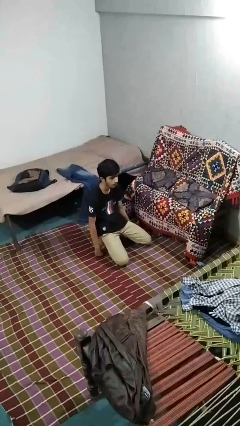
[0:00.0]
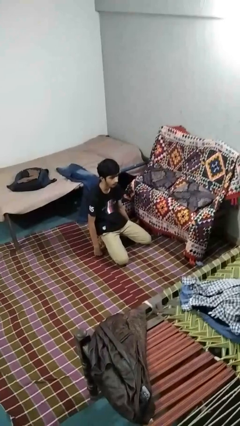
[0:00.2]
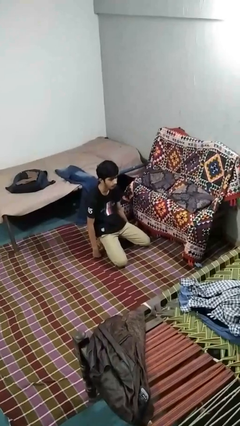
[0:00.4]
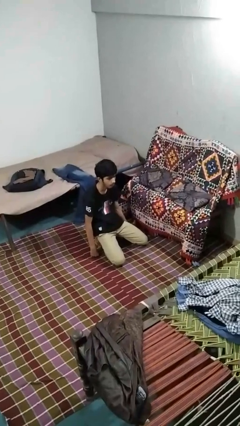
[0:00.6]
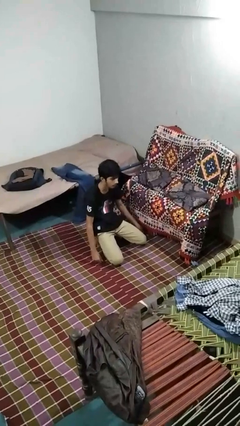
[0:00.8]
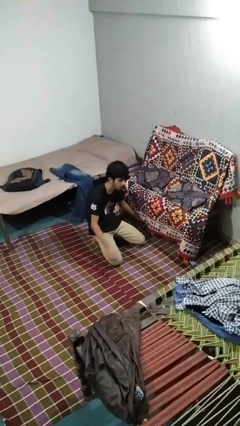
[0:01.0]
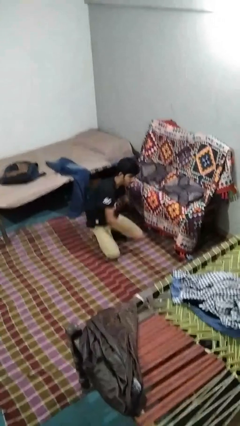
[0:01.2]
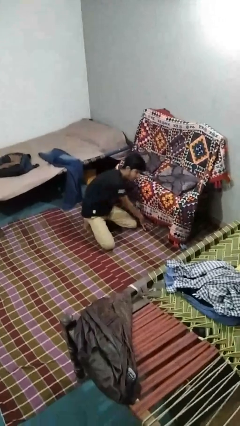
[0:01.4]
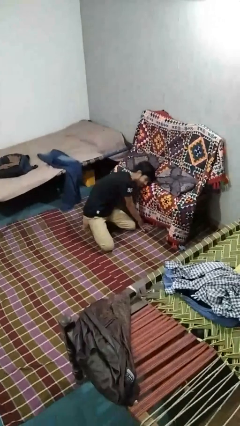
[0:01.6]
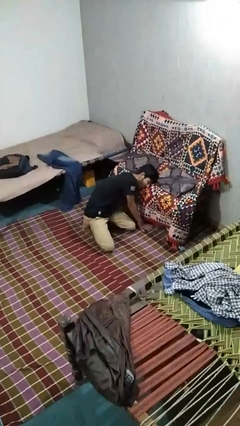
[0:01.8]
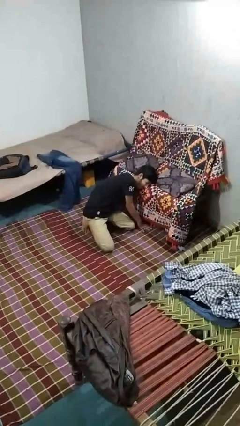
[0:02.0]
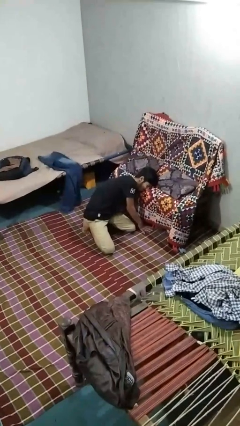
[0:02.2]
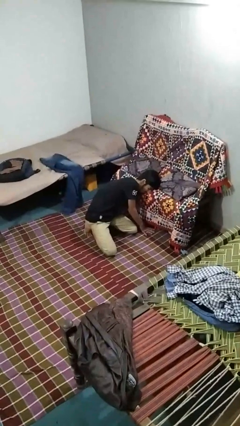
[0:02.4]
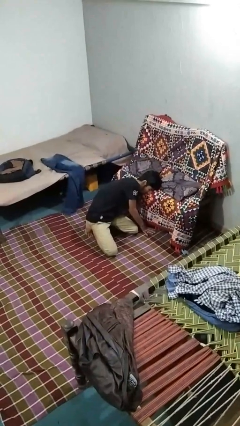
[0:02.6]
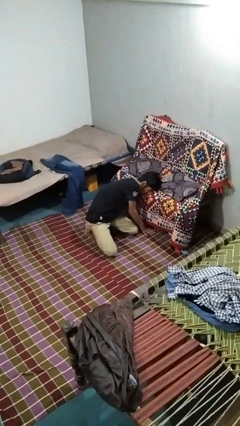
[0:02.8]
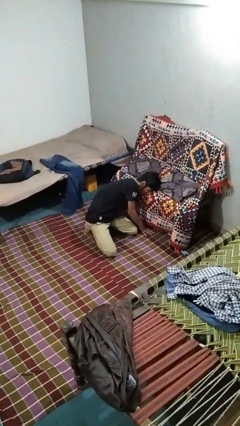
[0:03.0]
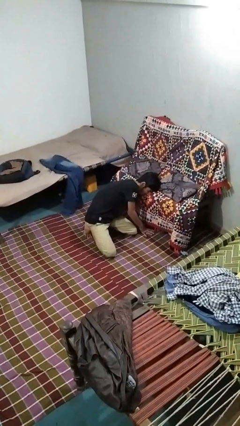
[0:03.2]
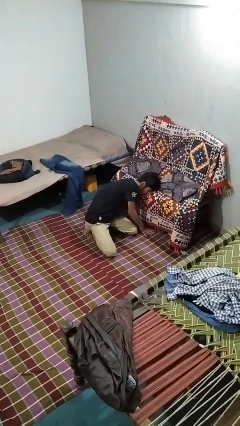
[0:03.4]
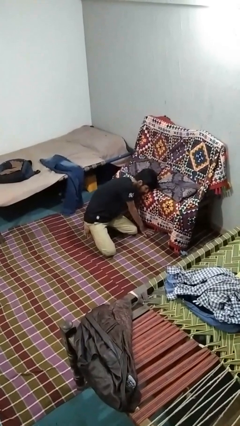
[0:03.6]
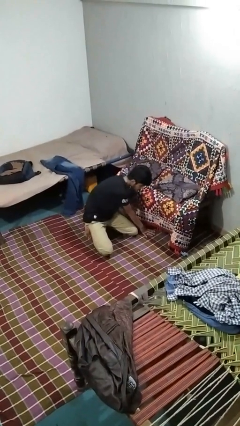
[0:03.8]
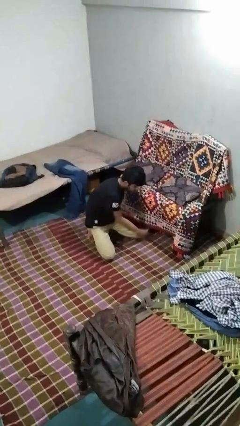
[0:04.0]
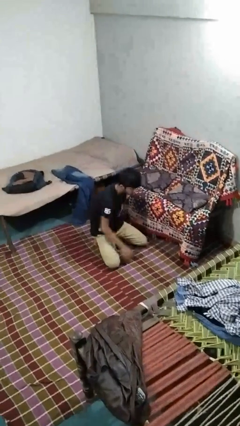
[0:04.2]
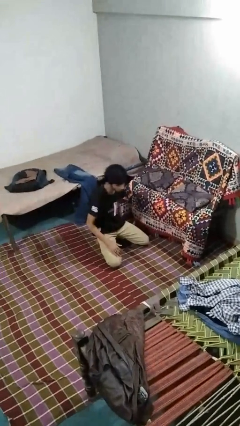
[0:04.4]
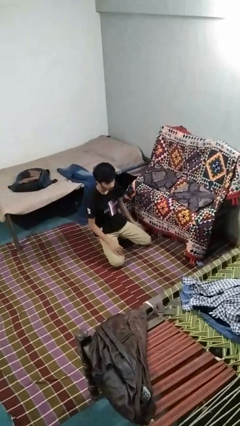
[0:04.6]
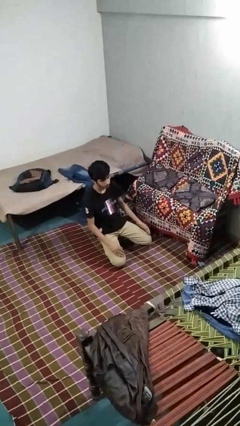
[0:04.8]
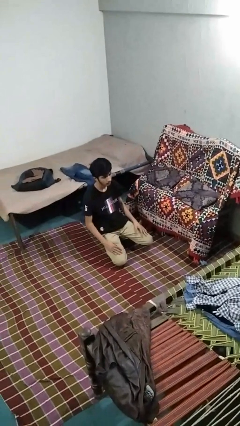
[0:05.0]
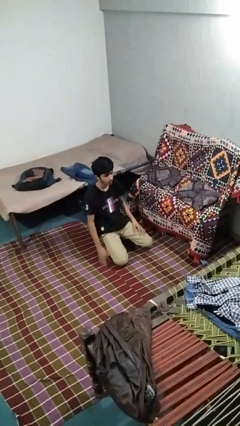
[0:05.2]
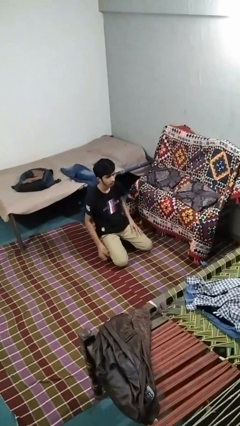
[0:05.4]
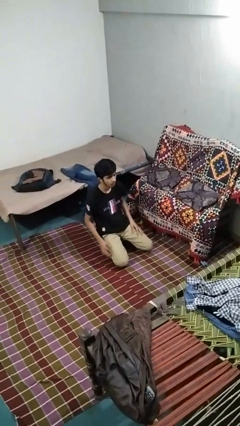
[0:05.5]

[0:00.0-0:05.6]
person searches under couch

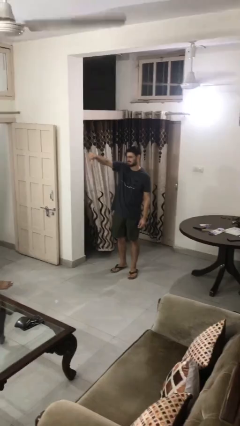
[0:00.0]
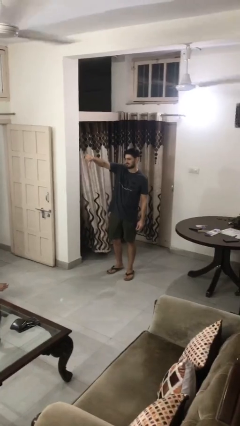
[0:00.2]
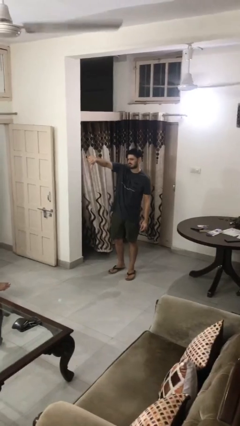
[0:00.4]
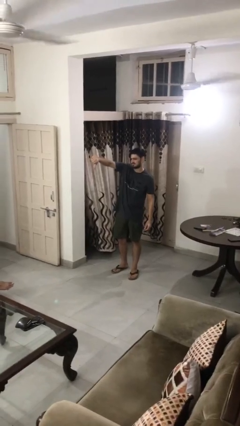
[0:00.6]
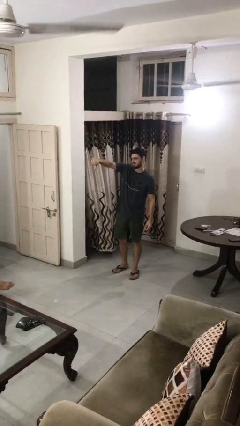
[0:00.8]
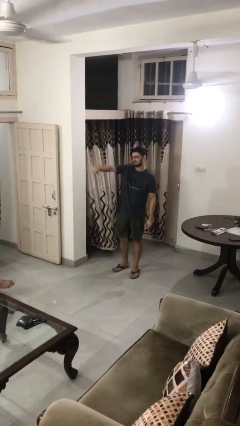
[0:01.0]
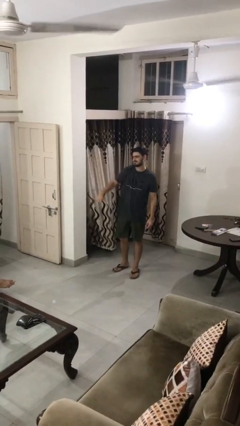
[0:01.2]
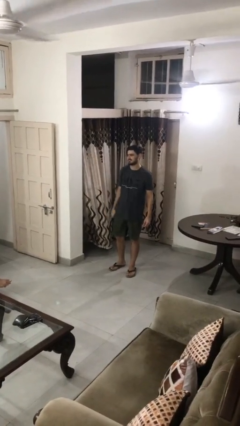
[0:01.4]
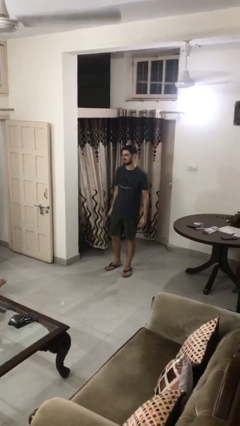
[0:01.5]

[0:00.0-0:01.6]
person gestures thumbs down

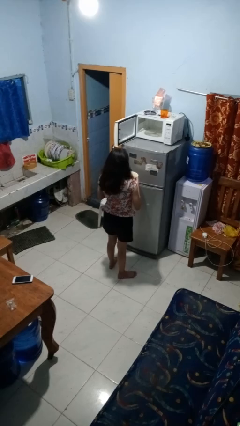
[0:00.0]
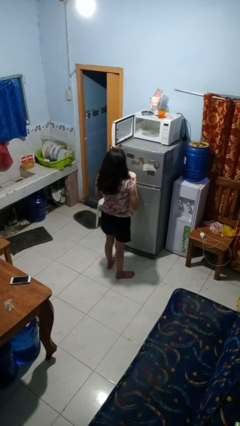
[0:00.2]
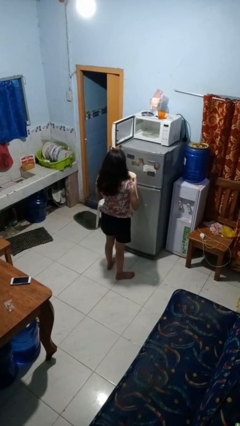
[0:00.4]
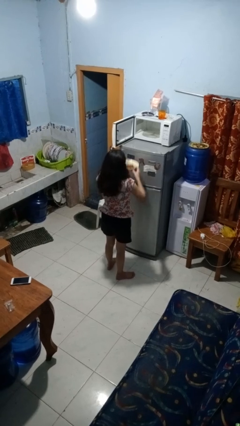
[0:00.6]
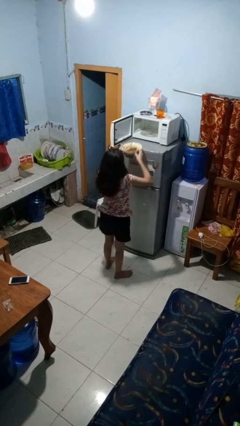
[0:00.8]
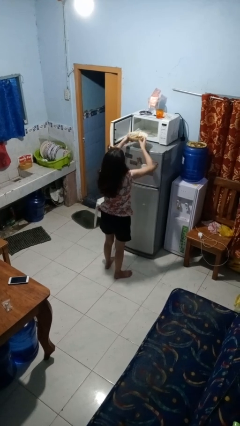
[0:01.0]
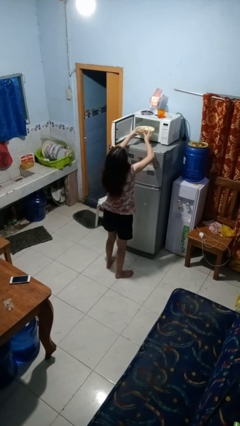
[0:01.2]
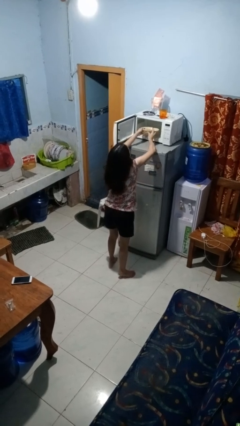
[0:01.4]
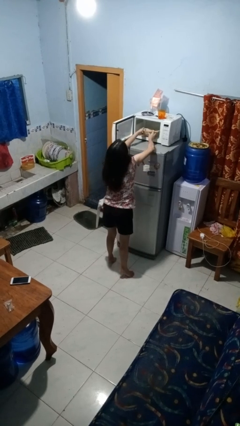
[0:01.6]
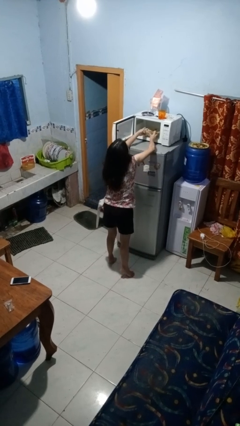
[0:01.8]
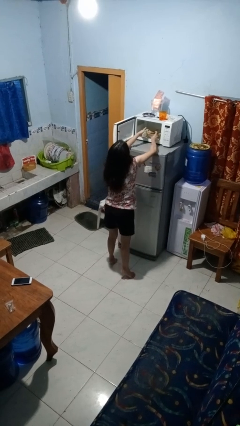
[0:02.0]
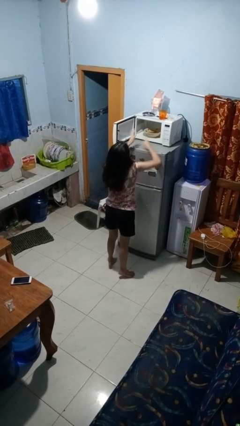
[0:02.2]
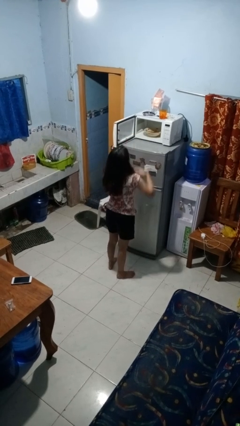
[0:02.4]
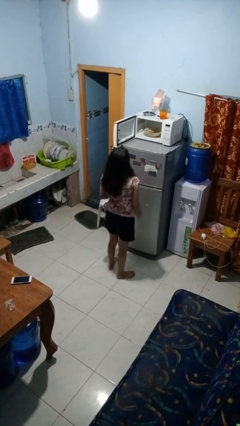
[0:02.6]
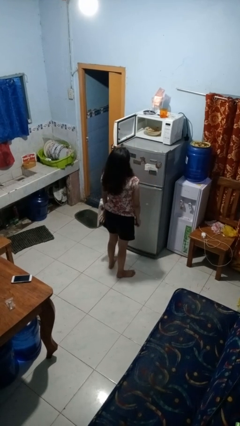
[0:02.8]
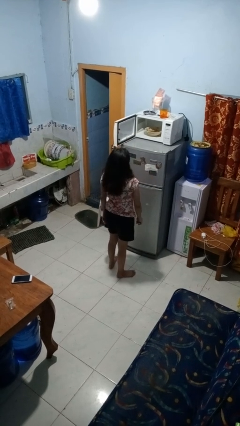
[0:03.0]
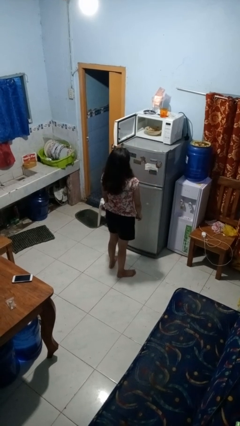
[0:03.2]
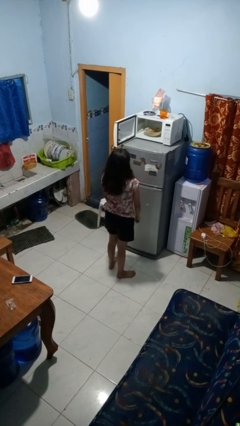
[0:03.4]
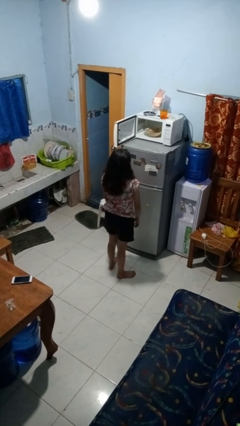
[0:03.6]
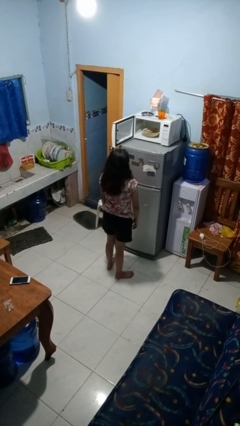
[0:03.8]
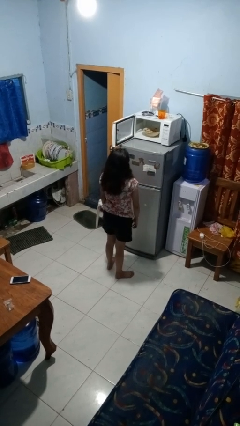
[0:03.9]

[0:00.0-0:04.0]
person puts object into microwave

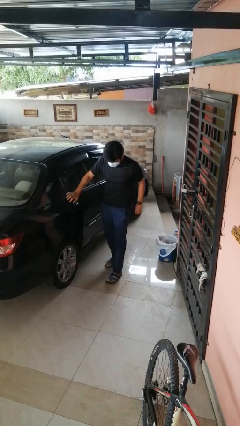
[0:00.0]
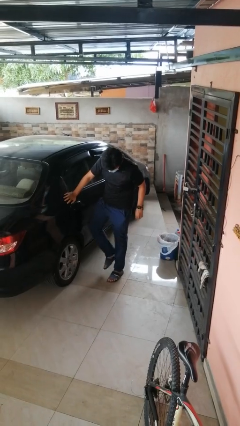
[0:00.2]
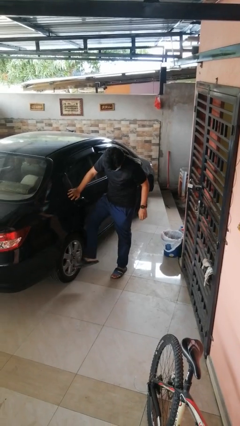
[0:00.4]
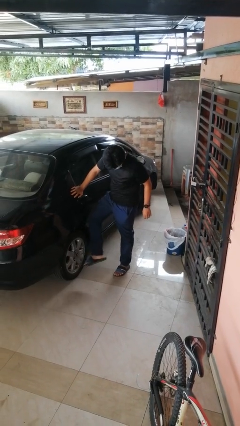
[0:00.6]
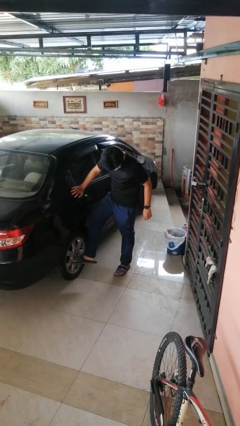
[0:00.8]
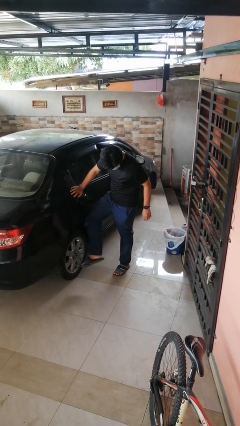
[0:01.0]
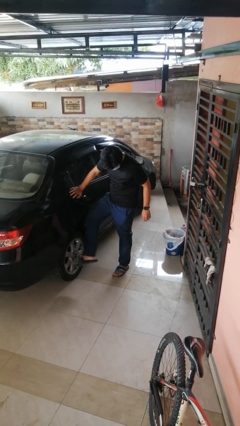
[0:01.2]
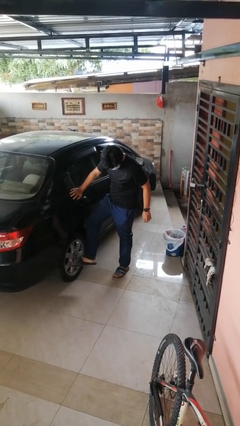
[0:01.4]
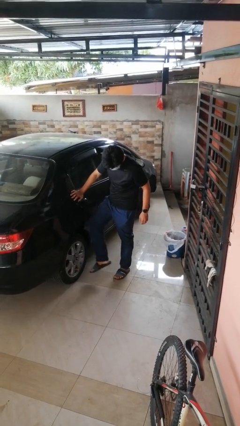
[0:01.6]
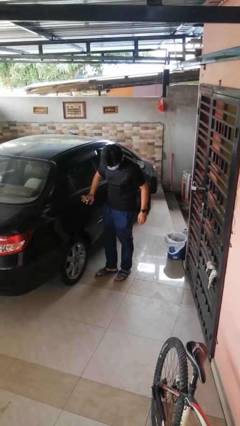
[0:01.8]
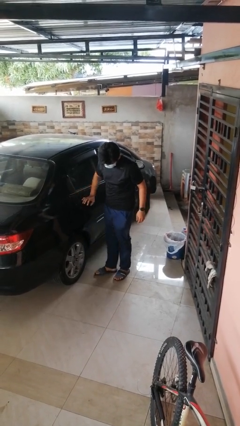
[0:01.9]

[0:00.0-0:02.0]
person kicks car tires

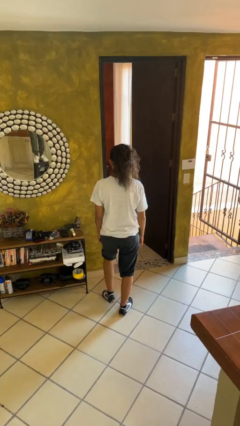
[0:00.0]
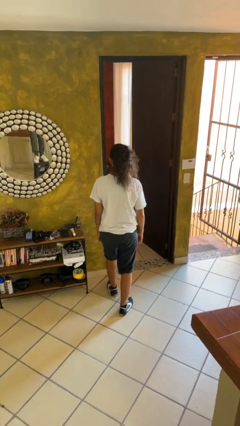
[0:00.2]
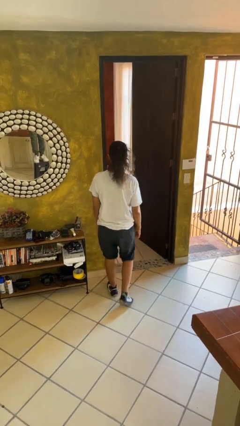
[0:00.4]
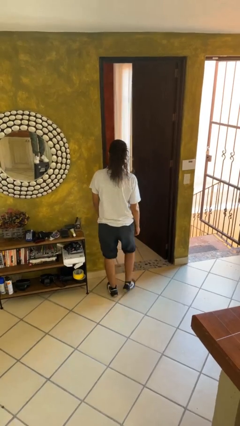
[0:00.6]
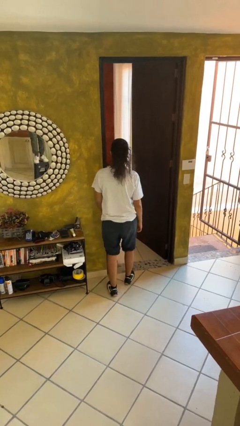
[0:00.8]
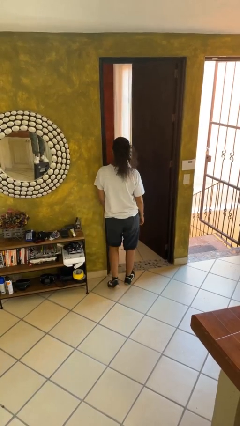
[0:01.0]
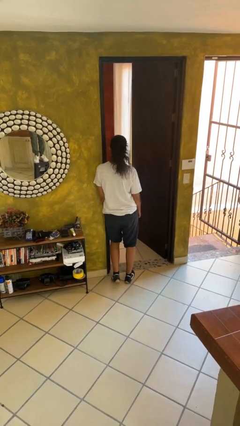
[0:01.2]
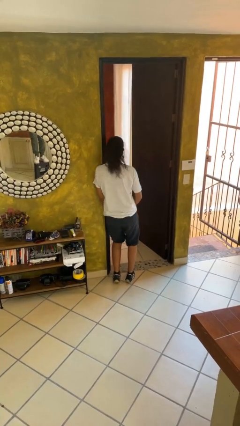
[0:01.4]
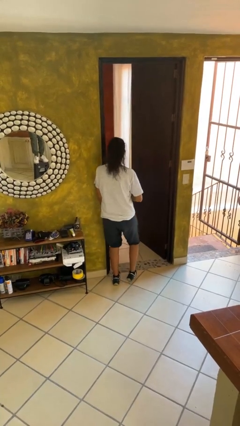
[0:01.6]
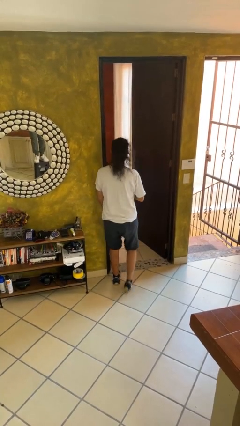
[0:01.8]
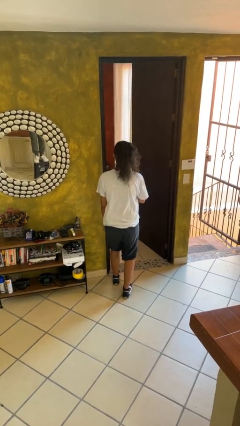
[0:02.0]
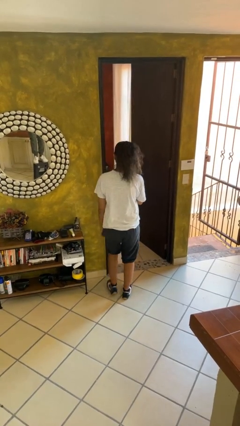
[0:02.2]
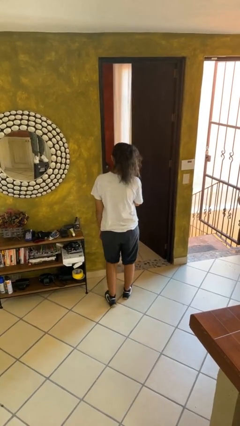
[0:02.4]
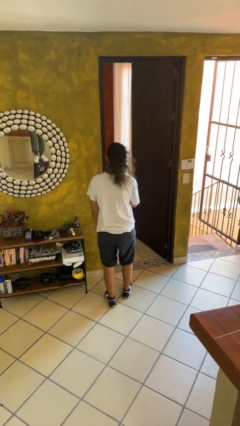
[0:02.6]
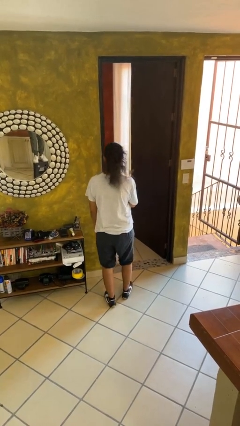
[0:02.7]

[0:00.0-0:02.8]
person bumps into wall

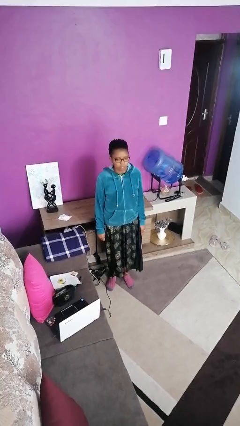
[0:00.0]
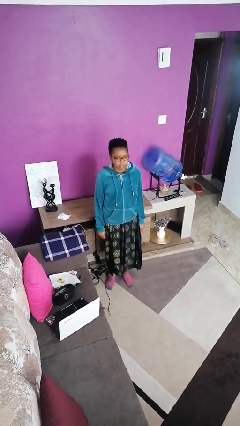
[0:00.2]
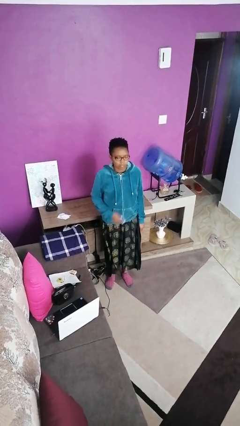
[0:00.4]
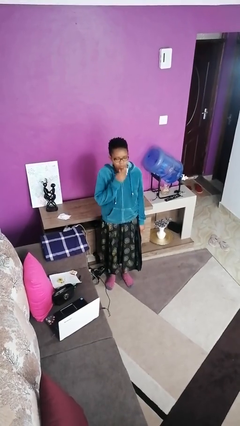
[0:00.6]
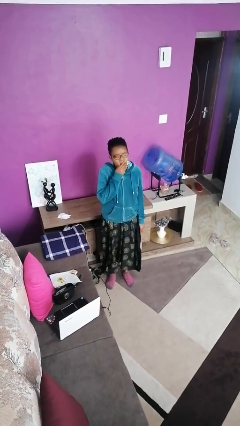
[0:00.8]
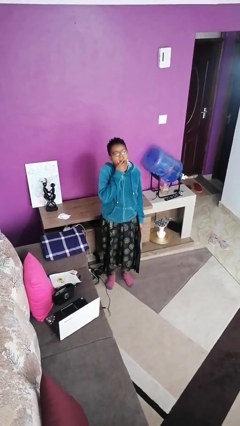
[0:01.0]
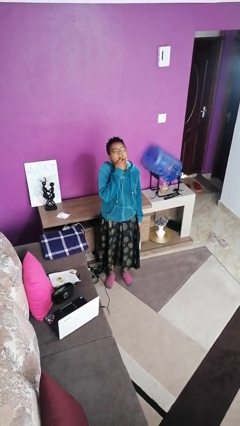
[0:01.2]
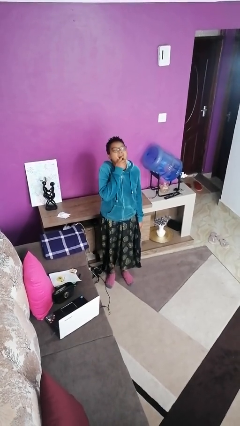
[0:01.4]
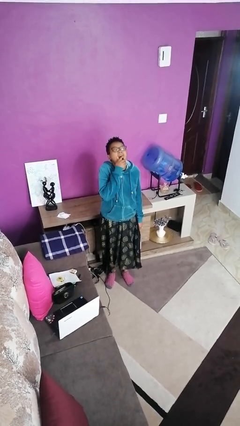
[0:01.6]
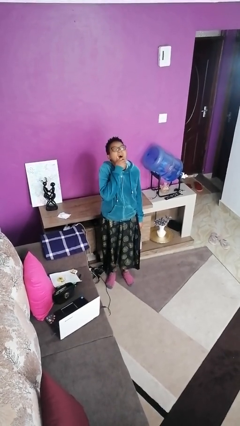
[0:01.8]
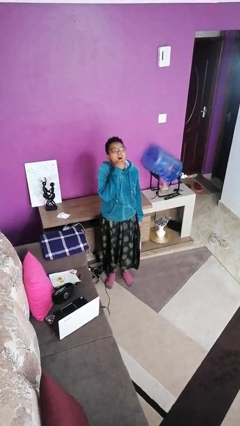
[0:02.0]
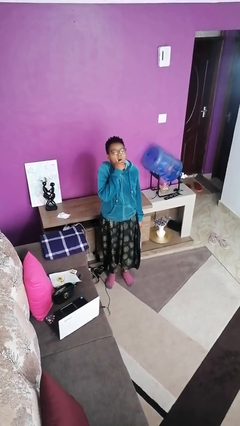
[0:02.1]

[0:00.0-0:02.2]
person opens cabinet
